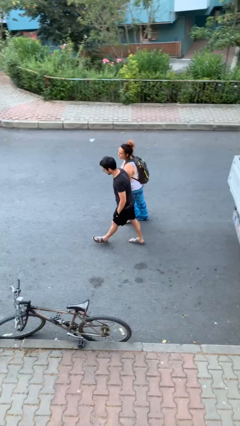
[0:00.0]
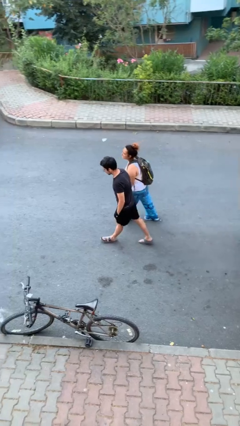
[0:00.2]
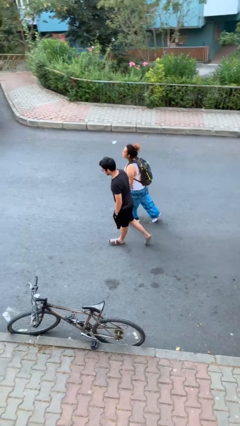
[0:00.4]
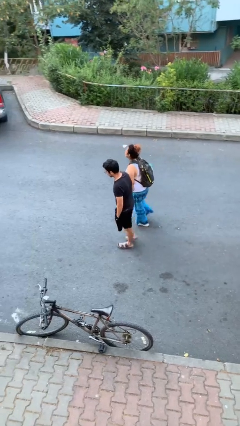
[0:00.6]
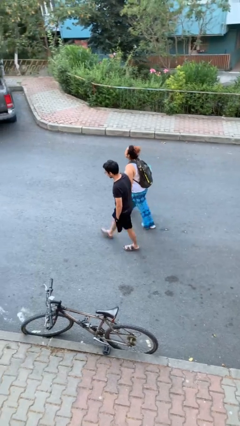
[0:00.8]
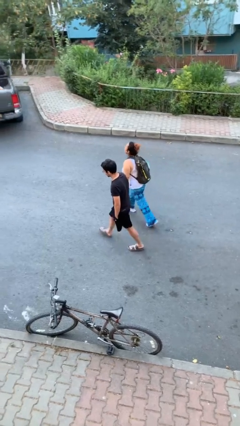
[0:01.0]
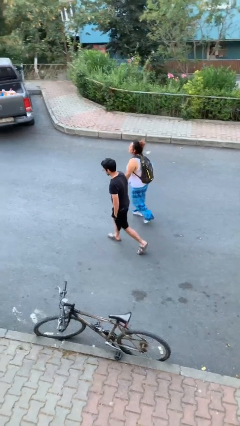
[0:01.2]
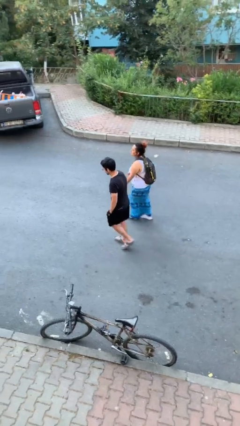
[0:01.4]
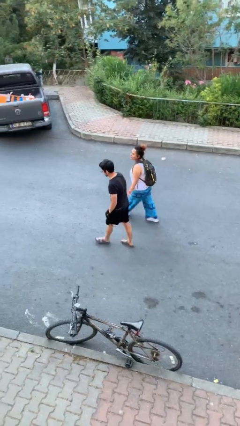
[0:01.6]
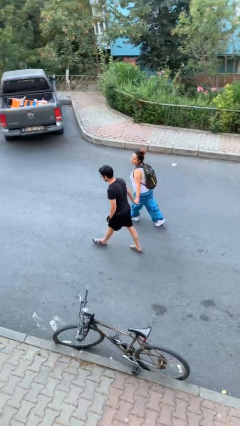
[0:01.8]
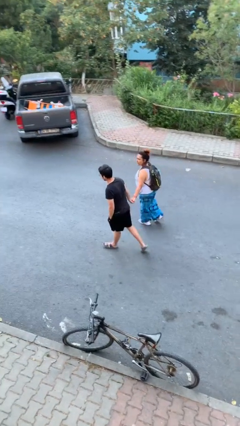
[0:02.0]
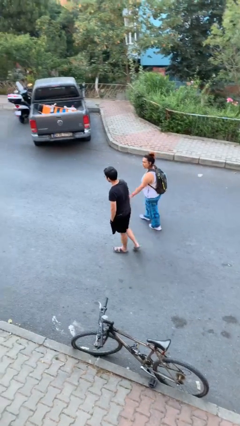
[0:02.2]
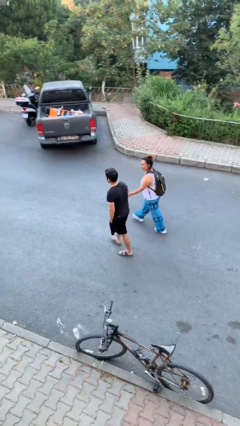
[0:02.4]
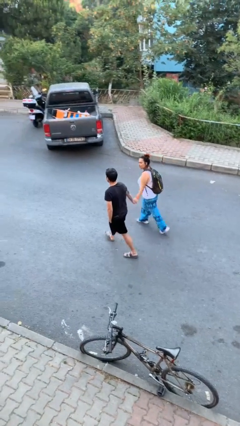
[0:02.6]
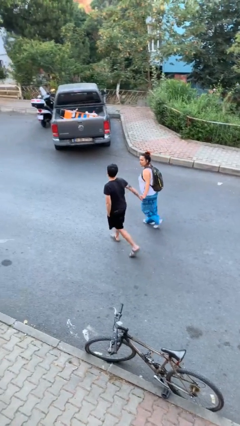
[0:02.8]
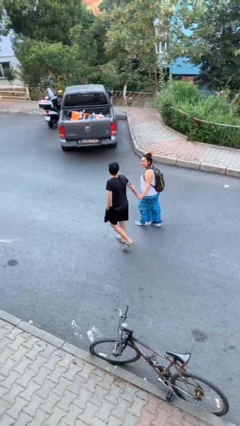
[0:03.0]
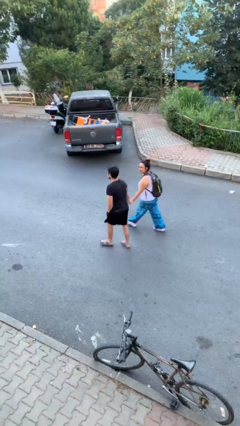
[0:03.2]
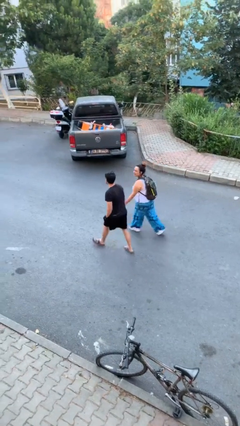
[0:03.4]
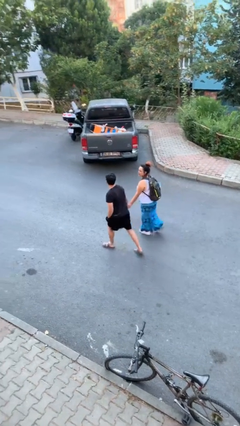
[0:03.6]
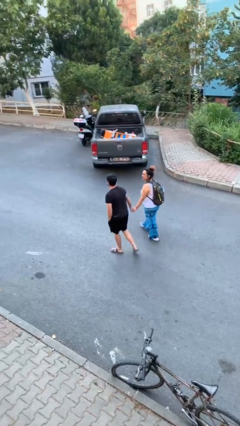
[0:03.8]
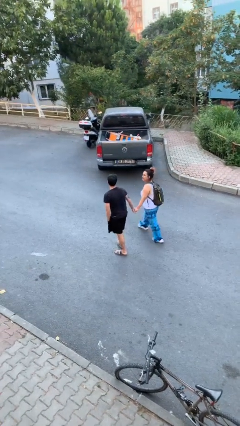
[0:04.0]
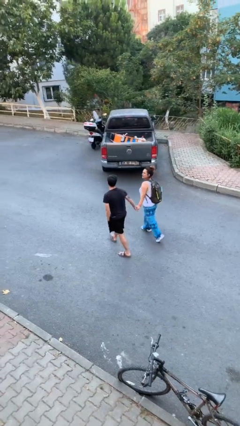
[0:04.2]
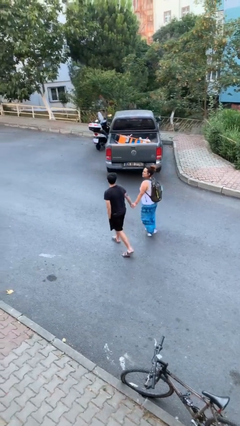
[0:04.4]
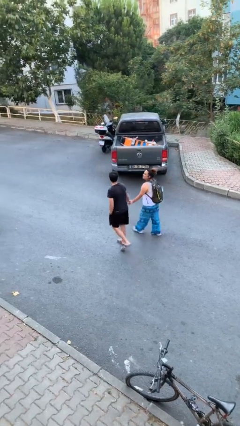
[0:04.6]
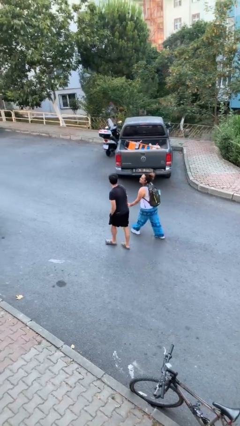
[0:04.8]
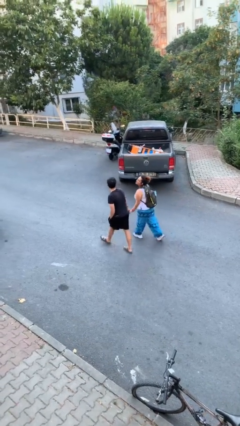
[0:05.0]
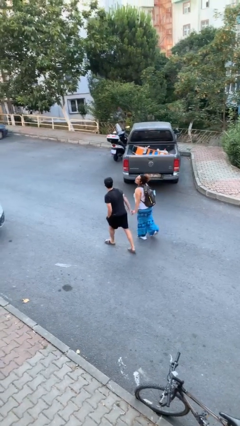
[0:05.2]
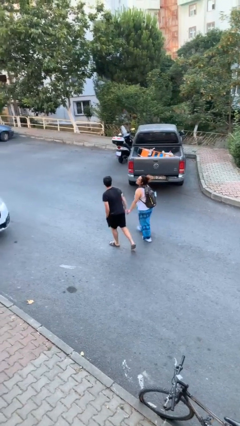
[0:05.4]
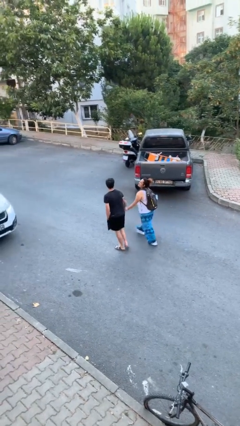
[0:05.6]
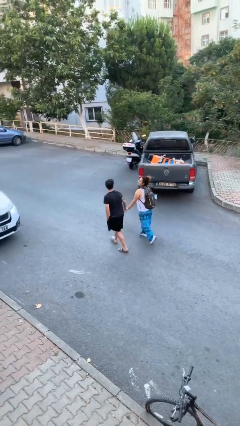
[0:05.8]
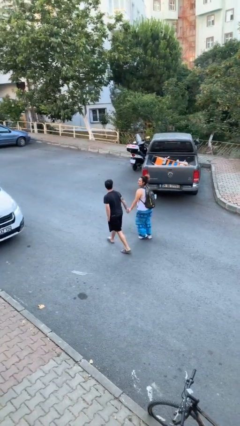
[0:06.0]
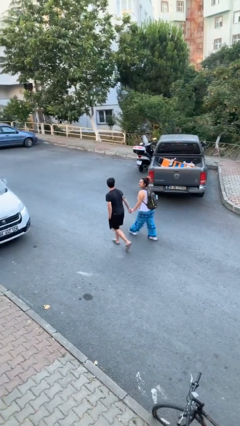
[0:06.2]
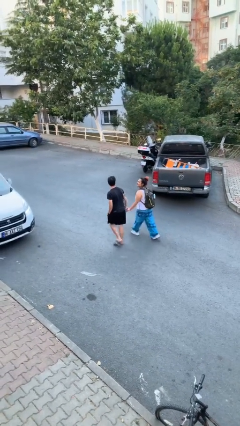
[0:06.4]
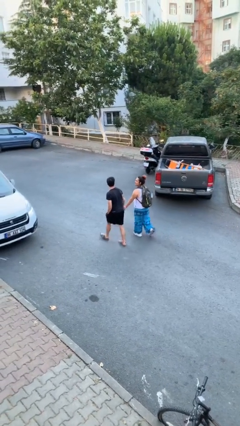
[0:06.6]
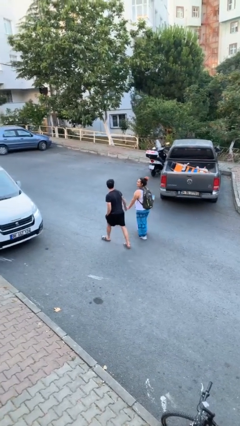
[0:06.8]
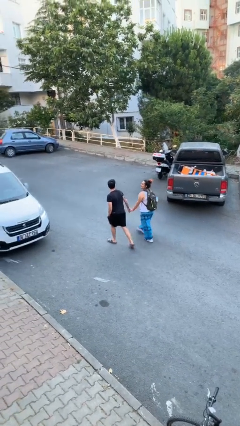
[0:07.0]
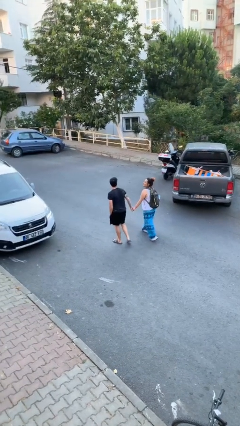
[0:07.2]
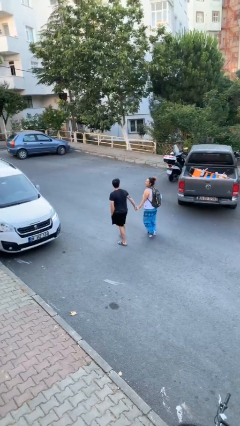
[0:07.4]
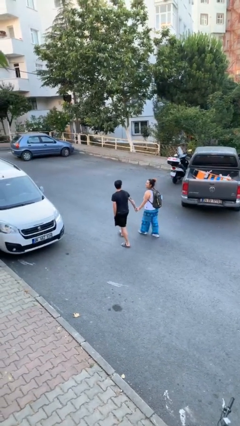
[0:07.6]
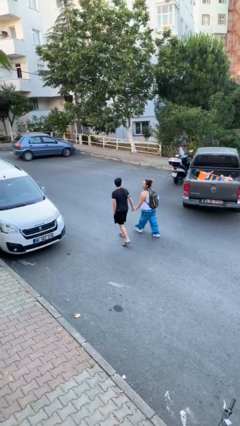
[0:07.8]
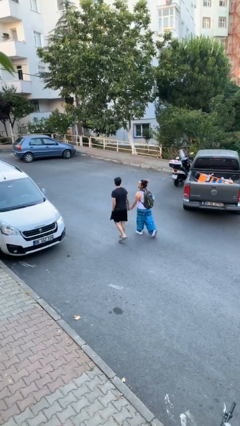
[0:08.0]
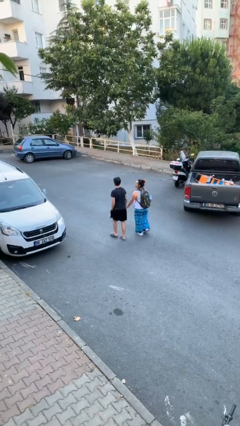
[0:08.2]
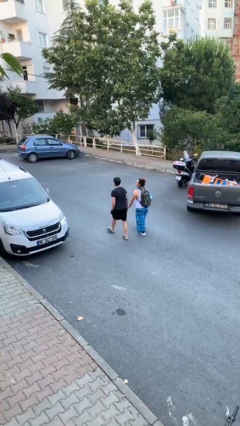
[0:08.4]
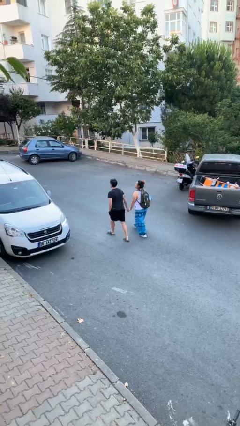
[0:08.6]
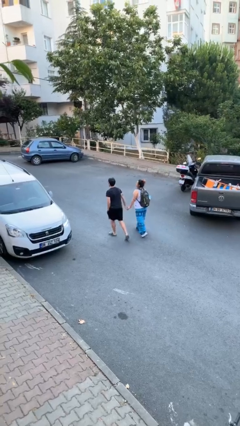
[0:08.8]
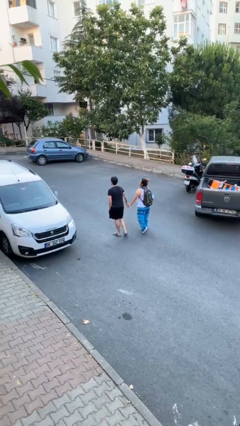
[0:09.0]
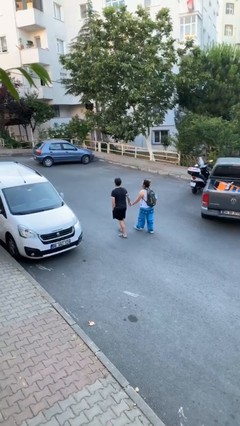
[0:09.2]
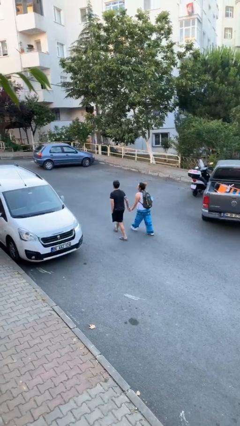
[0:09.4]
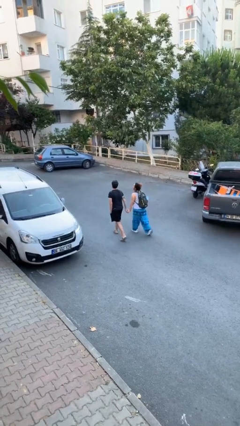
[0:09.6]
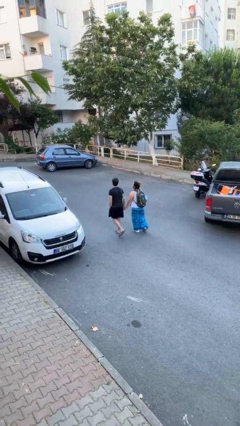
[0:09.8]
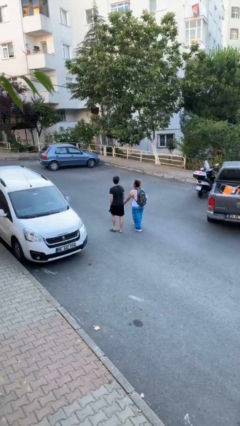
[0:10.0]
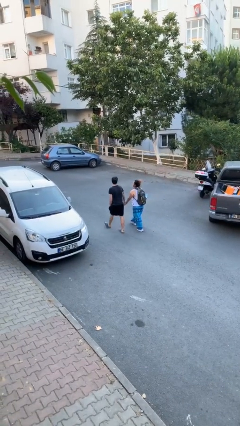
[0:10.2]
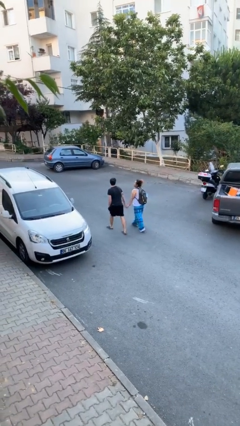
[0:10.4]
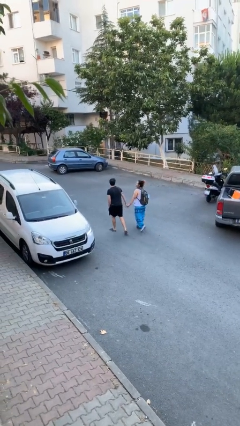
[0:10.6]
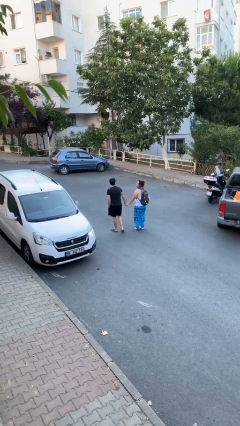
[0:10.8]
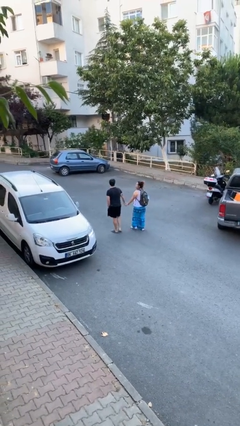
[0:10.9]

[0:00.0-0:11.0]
person holds hand

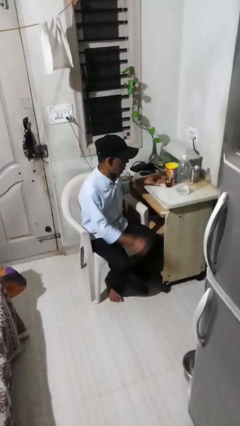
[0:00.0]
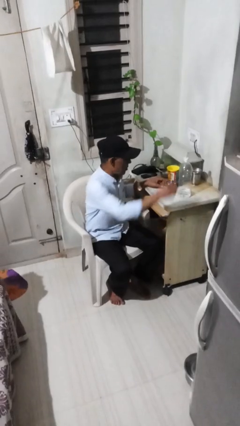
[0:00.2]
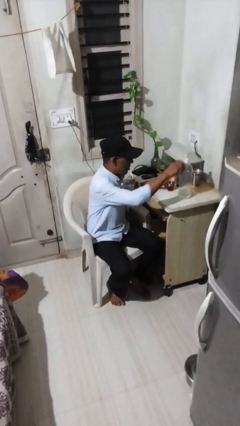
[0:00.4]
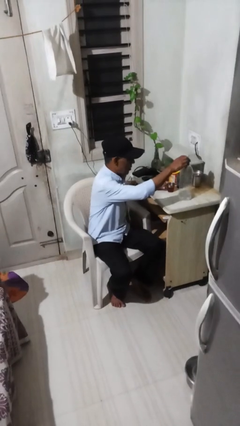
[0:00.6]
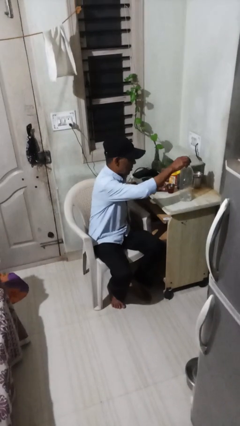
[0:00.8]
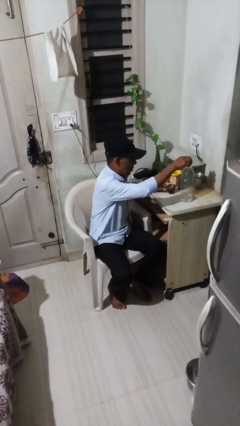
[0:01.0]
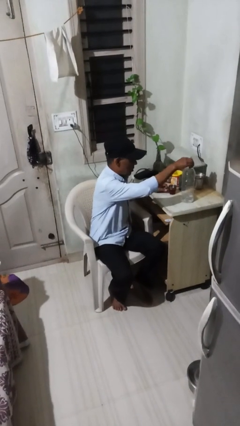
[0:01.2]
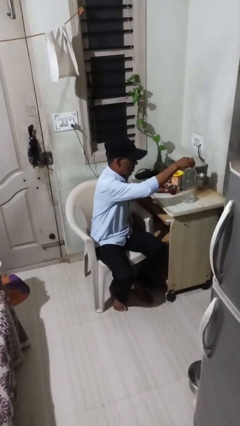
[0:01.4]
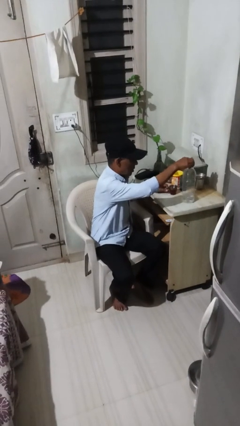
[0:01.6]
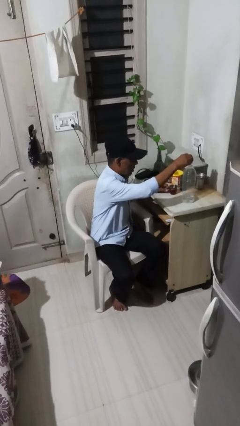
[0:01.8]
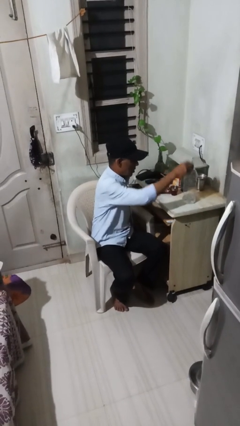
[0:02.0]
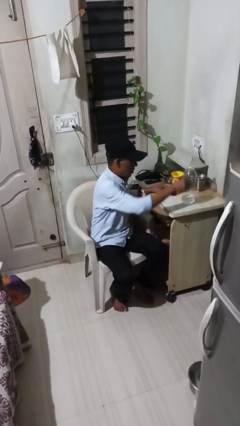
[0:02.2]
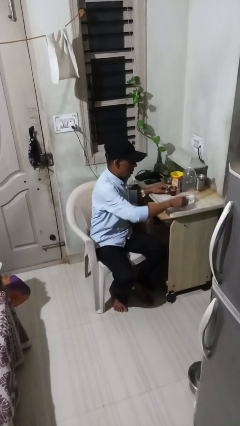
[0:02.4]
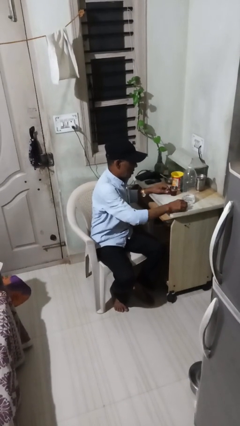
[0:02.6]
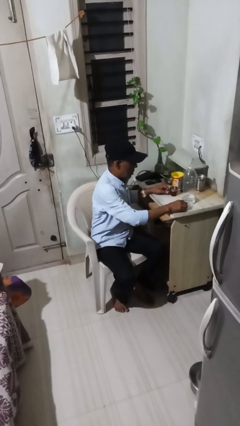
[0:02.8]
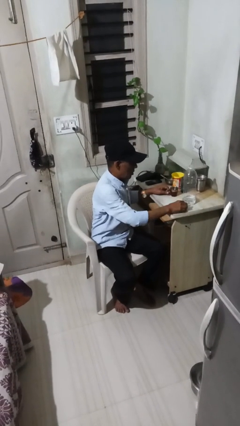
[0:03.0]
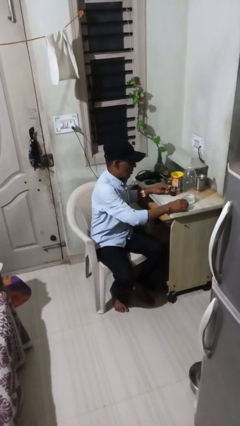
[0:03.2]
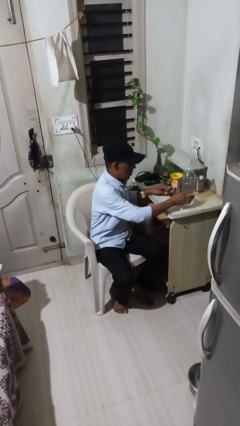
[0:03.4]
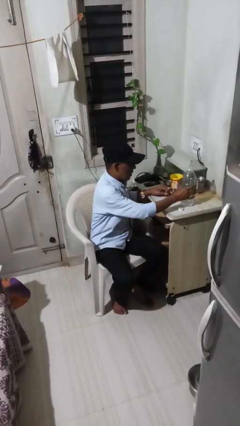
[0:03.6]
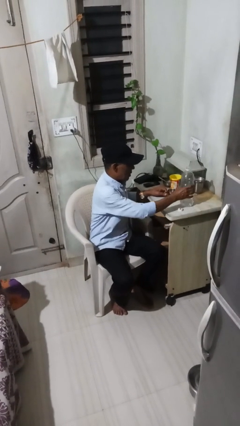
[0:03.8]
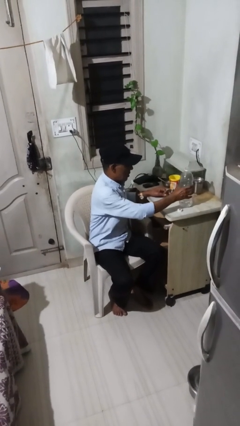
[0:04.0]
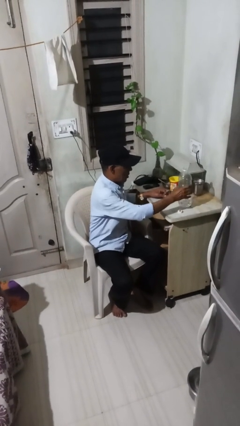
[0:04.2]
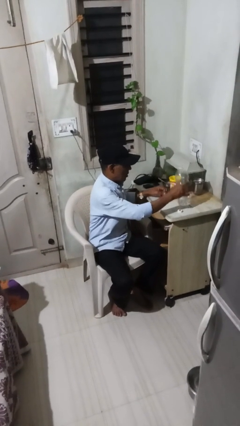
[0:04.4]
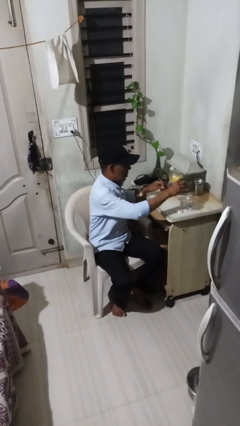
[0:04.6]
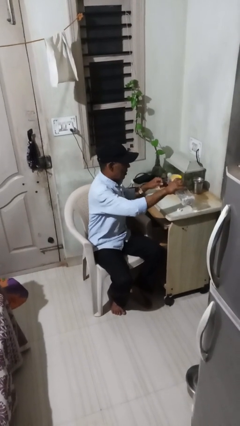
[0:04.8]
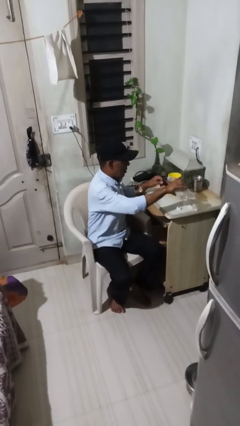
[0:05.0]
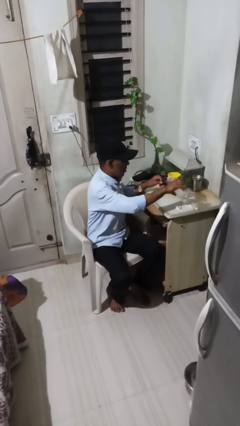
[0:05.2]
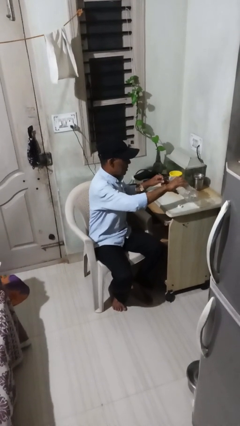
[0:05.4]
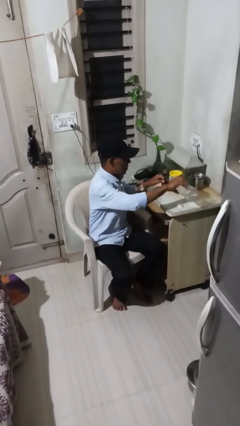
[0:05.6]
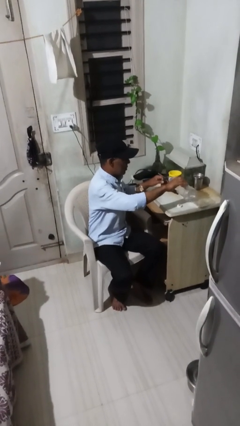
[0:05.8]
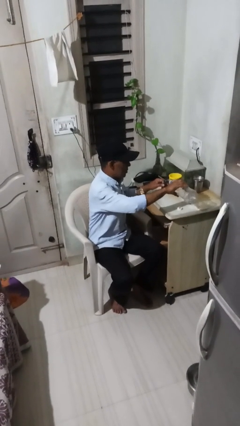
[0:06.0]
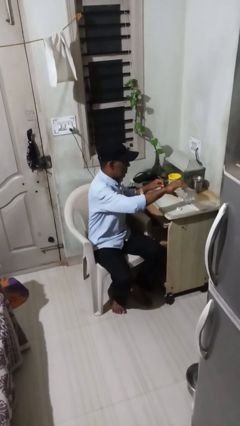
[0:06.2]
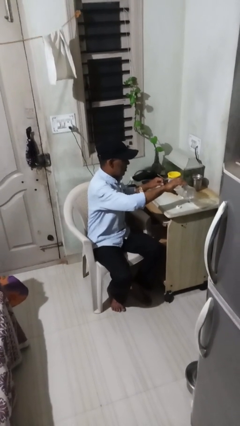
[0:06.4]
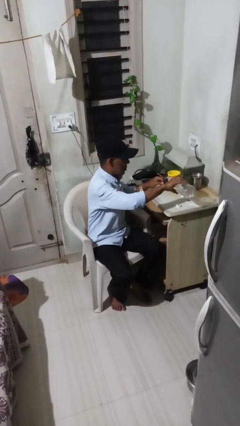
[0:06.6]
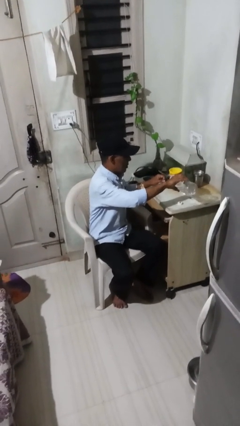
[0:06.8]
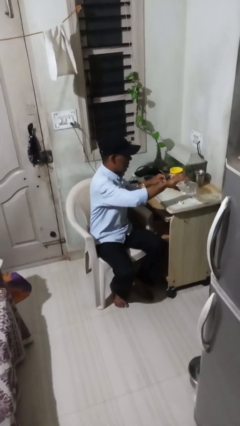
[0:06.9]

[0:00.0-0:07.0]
person pours liquid into cup
